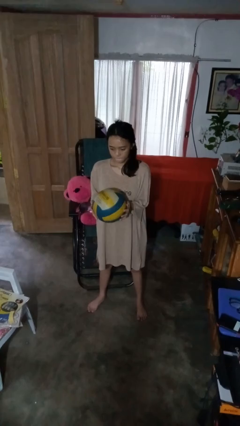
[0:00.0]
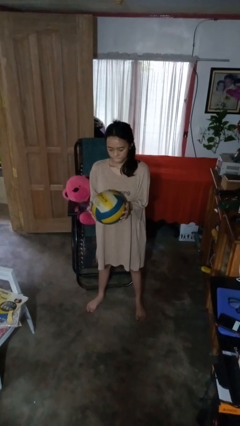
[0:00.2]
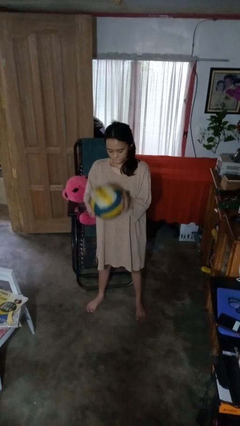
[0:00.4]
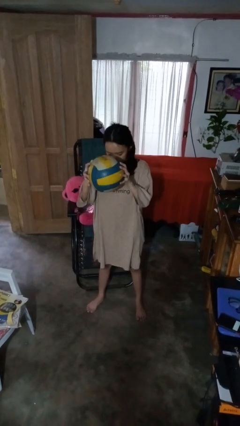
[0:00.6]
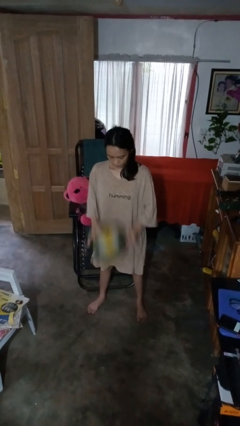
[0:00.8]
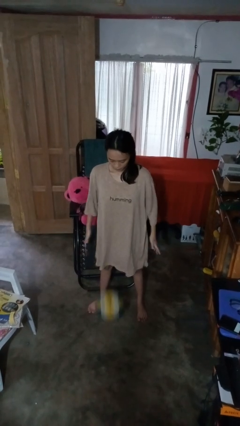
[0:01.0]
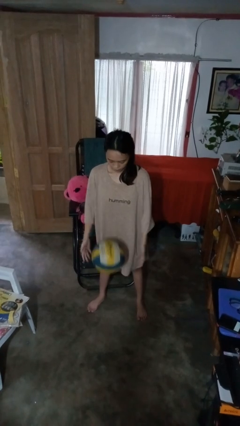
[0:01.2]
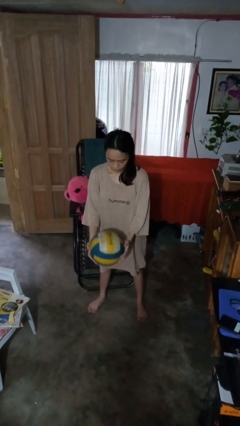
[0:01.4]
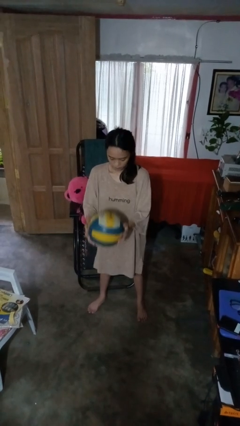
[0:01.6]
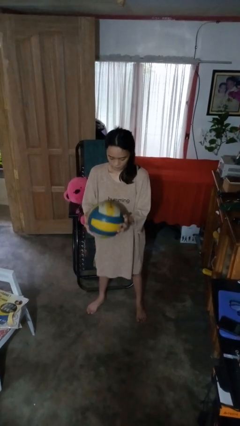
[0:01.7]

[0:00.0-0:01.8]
person bounces ball on floor

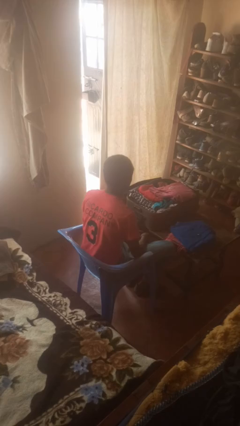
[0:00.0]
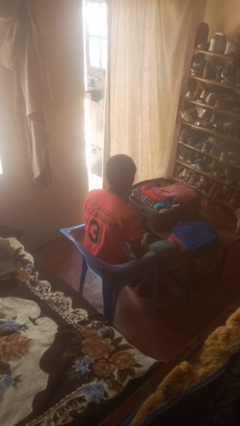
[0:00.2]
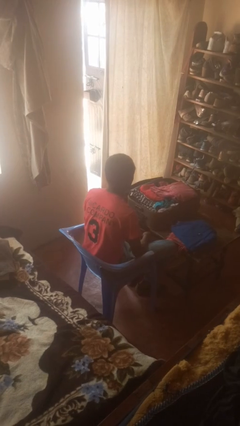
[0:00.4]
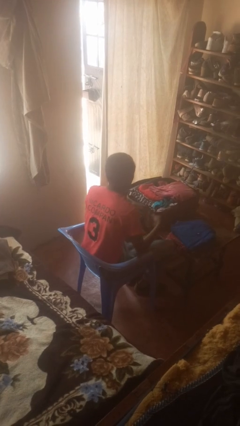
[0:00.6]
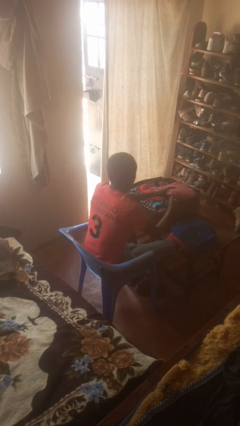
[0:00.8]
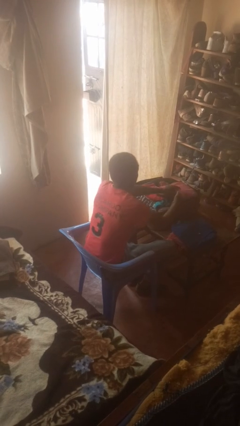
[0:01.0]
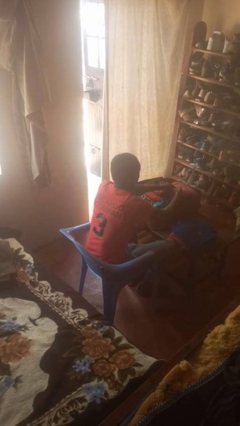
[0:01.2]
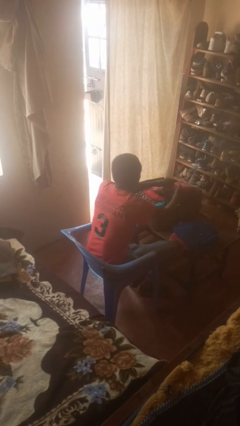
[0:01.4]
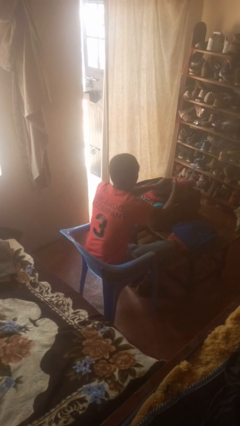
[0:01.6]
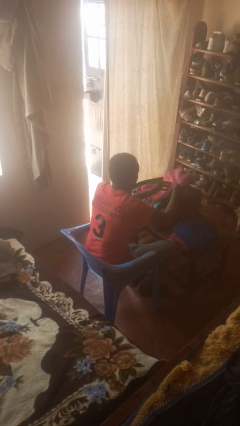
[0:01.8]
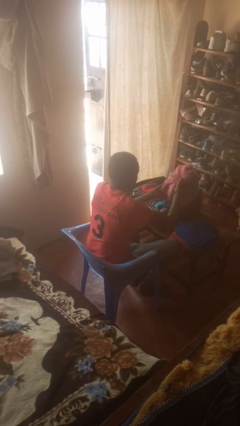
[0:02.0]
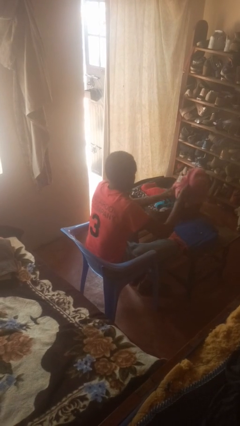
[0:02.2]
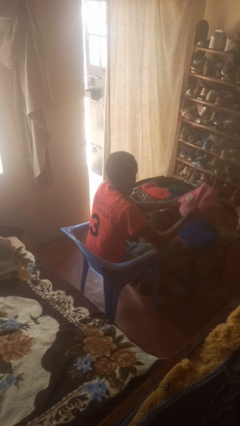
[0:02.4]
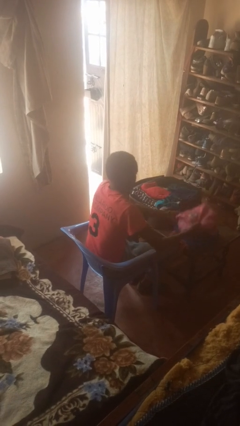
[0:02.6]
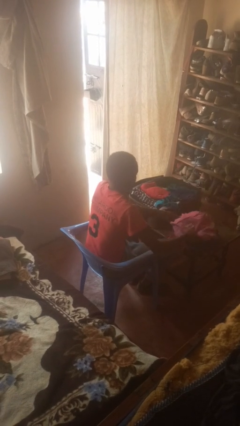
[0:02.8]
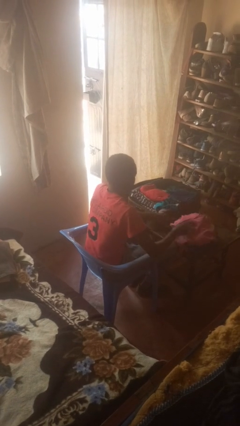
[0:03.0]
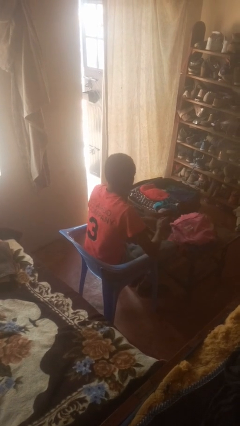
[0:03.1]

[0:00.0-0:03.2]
person unloads clothes from suitcase

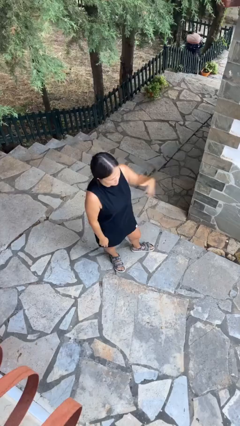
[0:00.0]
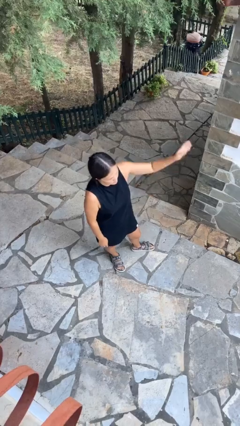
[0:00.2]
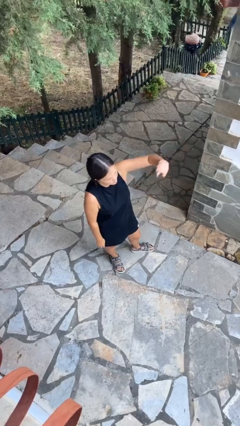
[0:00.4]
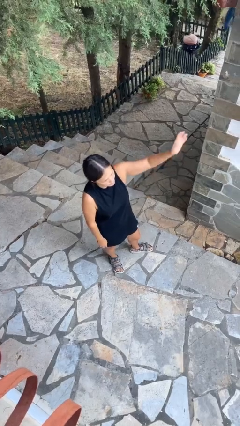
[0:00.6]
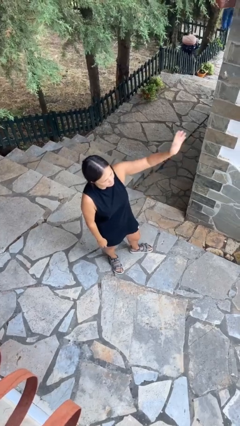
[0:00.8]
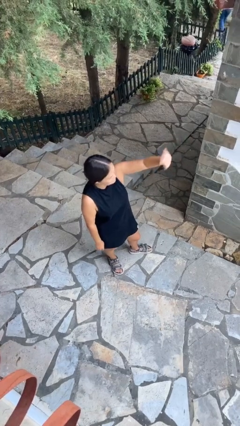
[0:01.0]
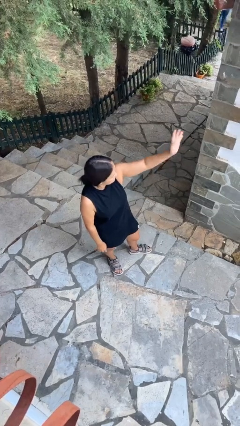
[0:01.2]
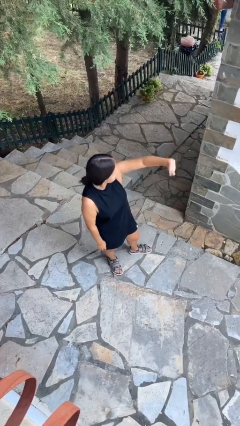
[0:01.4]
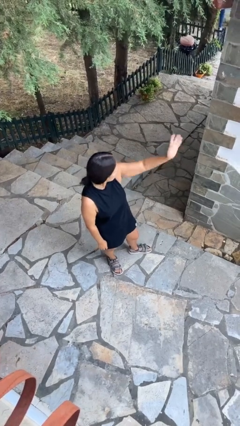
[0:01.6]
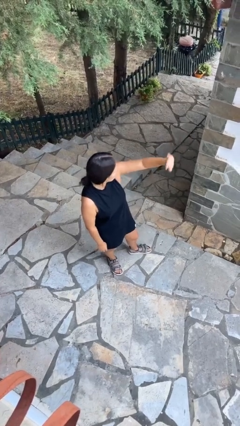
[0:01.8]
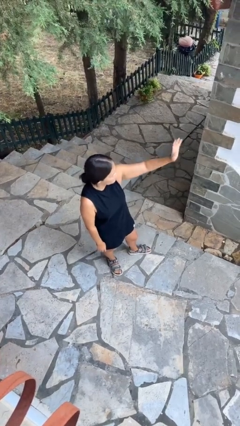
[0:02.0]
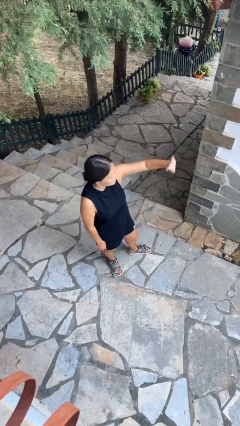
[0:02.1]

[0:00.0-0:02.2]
person waves at person

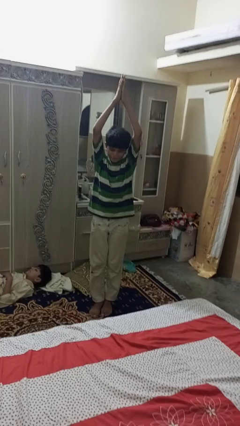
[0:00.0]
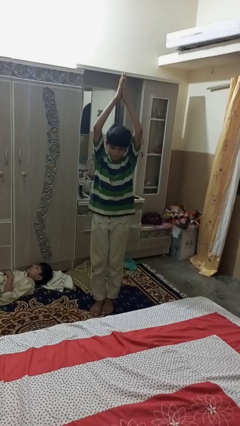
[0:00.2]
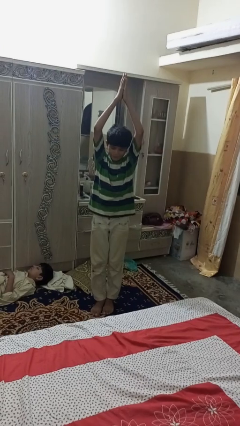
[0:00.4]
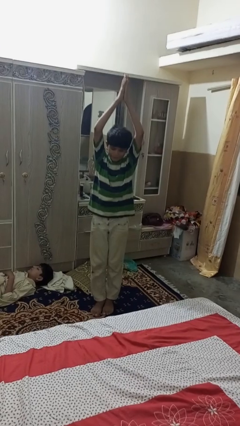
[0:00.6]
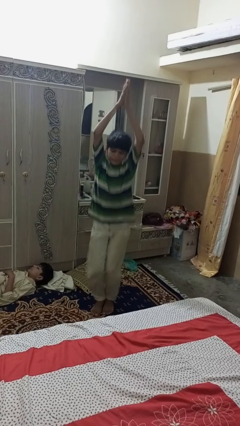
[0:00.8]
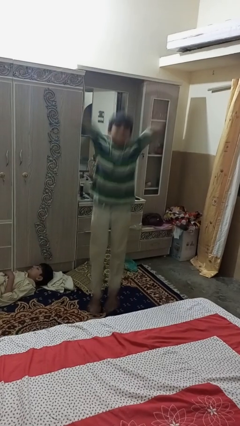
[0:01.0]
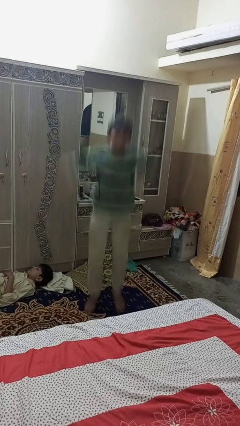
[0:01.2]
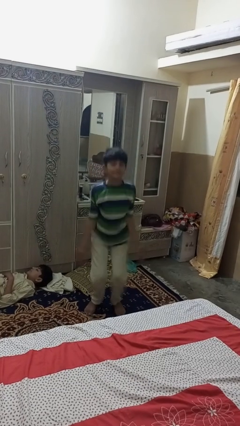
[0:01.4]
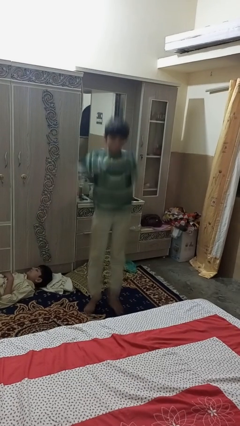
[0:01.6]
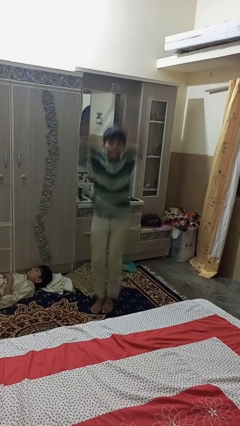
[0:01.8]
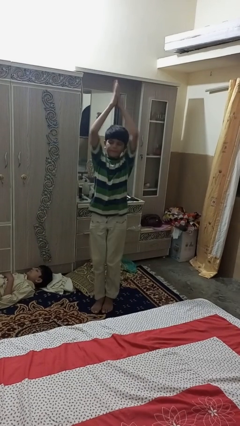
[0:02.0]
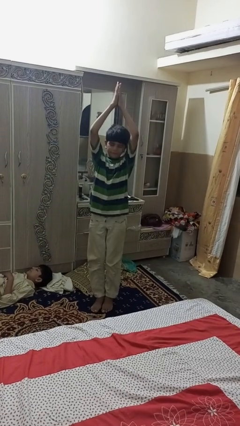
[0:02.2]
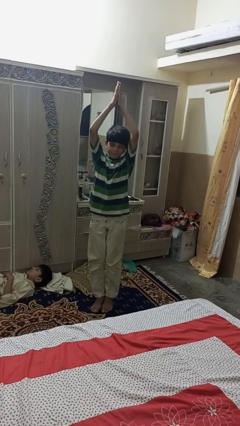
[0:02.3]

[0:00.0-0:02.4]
person exercises with jumping jacks

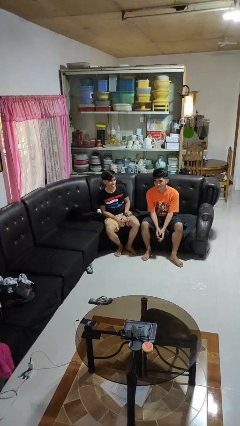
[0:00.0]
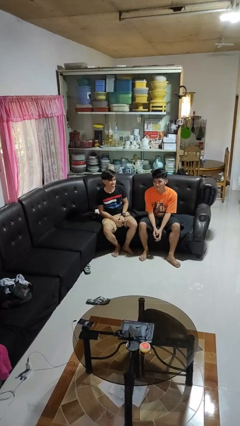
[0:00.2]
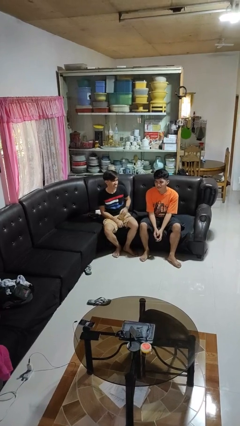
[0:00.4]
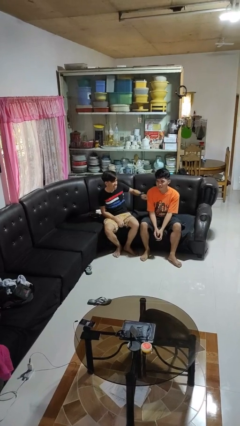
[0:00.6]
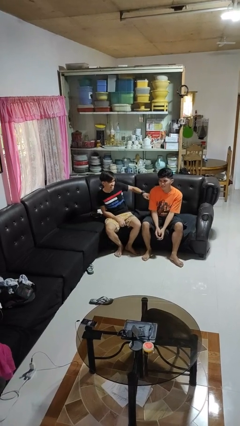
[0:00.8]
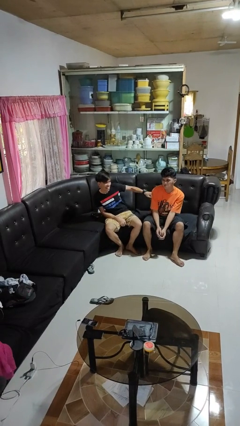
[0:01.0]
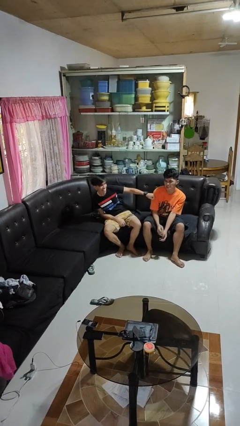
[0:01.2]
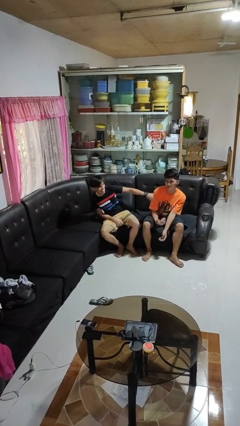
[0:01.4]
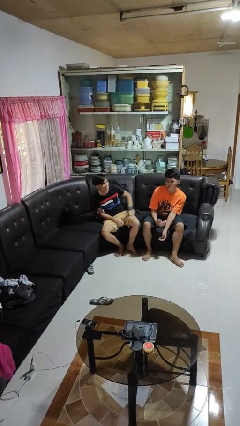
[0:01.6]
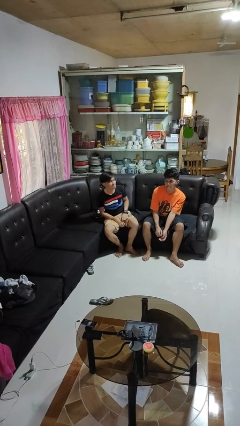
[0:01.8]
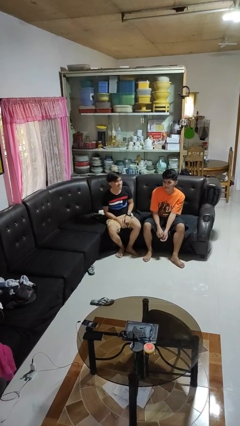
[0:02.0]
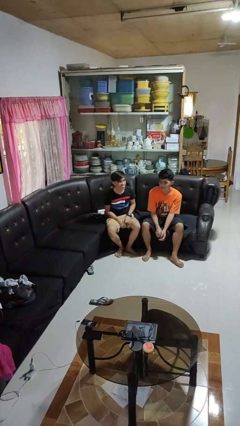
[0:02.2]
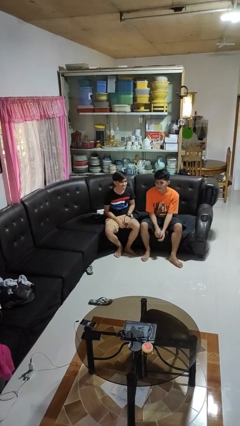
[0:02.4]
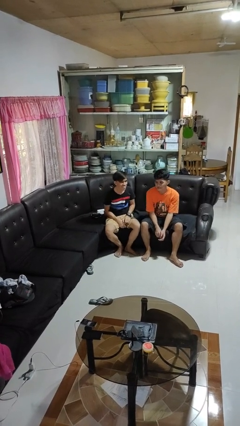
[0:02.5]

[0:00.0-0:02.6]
person pounds shoulders of person

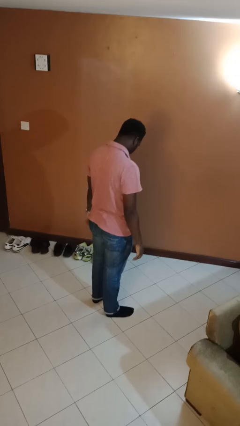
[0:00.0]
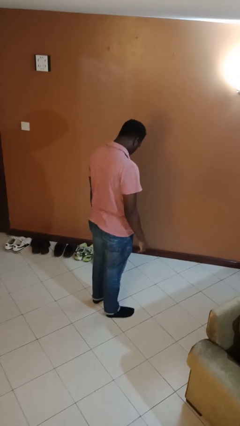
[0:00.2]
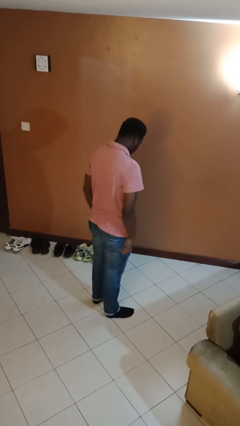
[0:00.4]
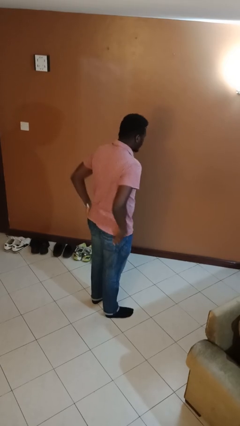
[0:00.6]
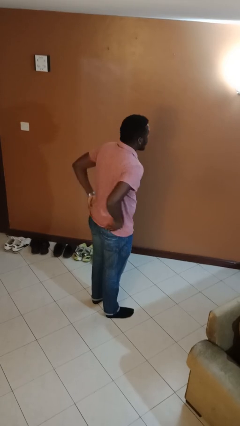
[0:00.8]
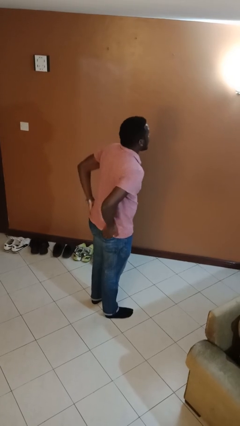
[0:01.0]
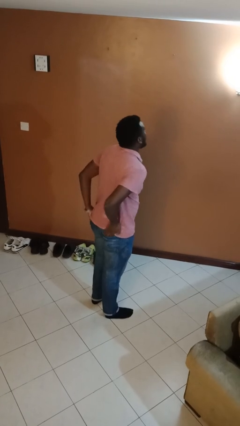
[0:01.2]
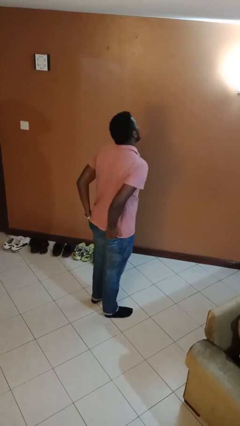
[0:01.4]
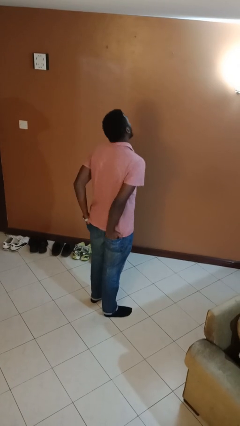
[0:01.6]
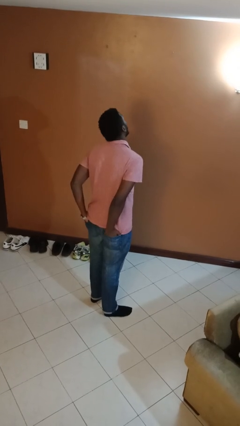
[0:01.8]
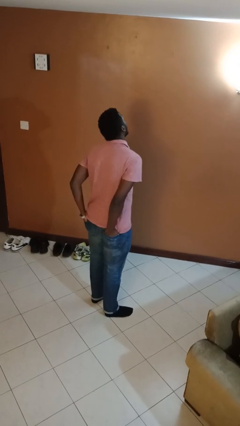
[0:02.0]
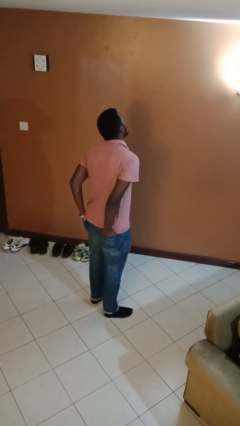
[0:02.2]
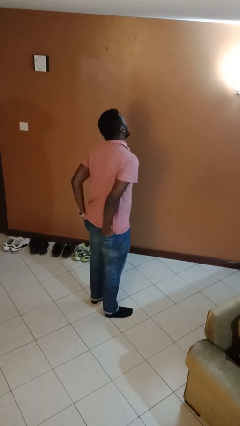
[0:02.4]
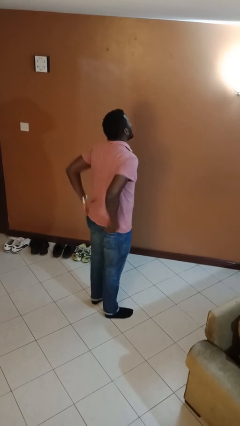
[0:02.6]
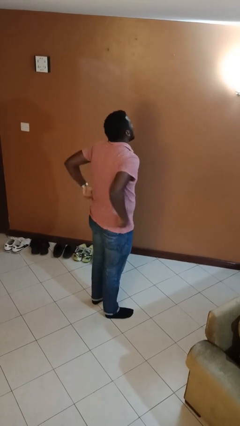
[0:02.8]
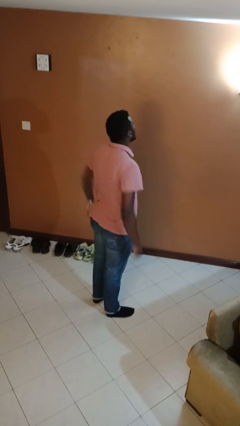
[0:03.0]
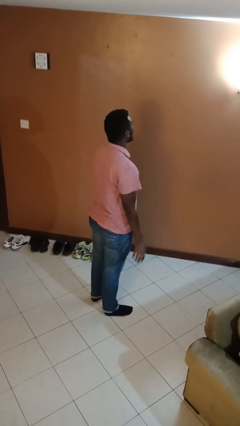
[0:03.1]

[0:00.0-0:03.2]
person puts hands in back pockets

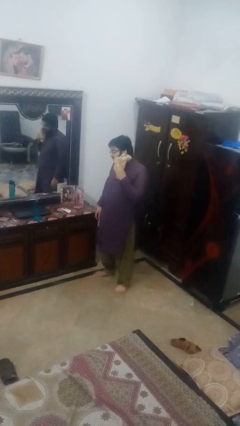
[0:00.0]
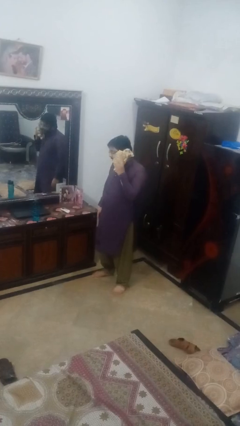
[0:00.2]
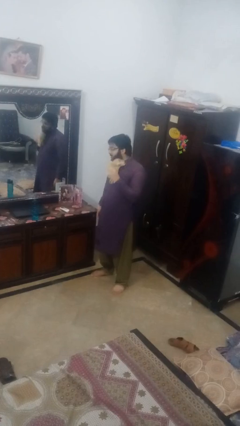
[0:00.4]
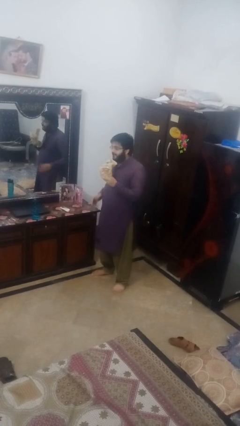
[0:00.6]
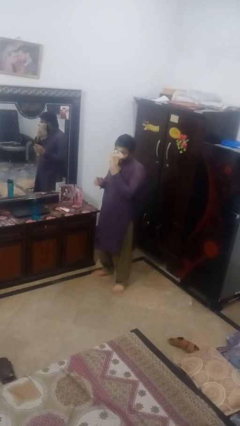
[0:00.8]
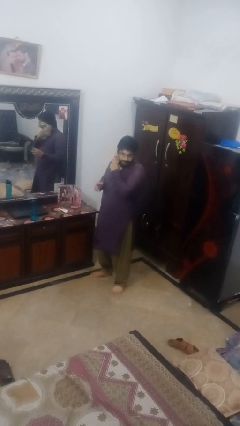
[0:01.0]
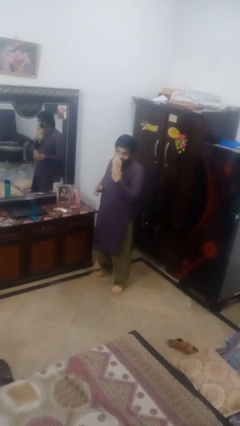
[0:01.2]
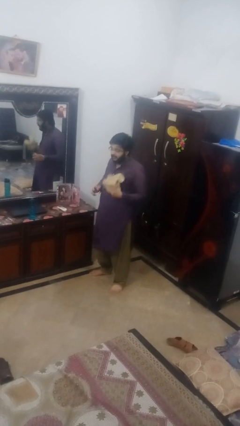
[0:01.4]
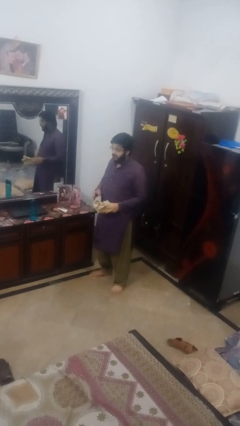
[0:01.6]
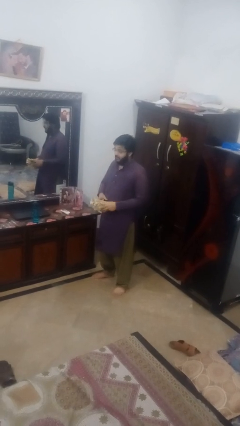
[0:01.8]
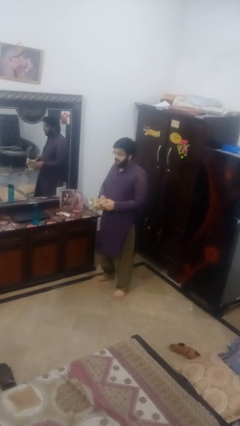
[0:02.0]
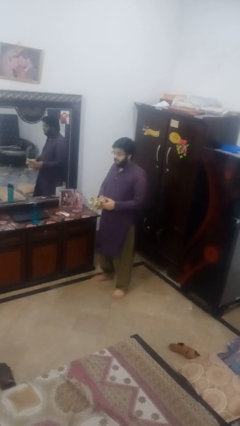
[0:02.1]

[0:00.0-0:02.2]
person wipes mouth with napkin
